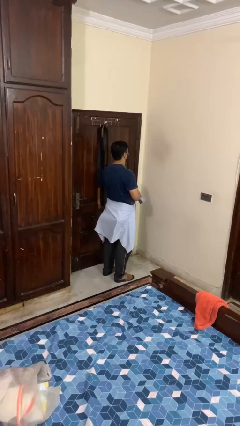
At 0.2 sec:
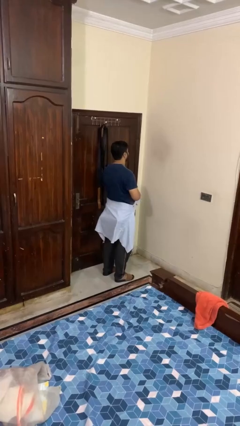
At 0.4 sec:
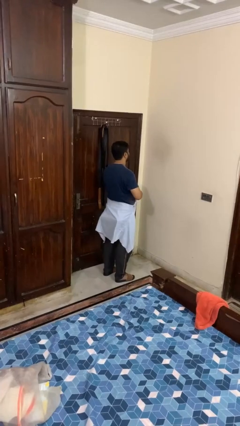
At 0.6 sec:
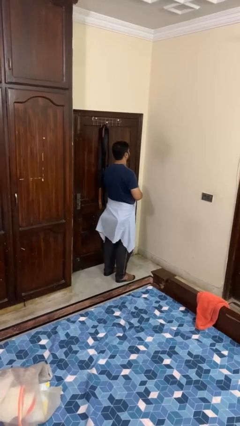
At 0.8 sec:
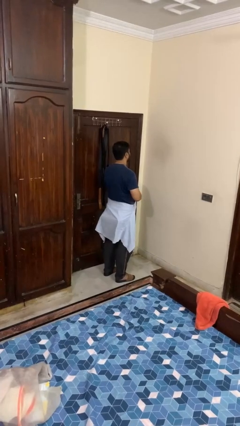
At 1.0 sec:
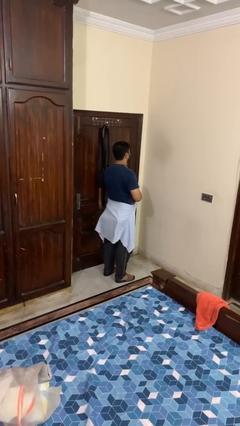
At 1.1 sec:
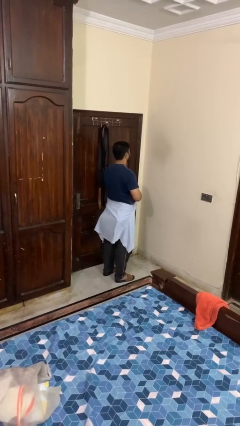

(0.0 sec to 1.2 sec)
person ties jacket around waist

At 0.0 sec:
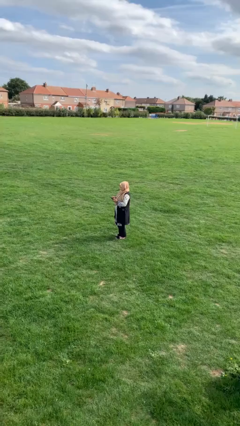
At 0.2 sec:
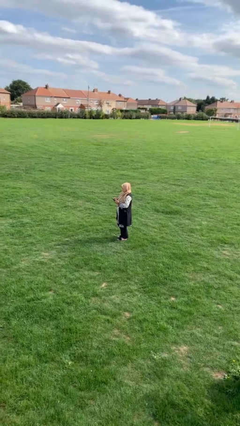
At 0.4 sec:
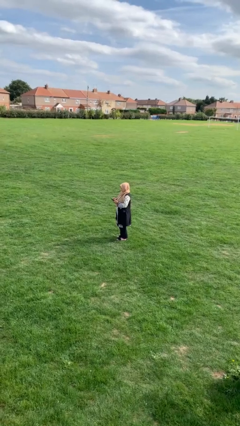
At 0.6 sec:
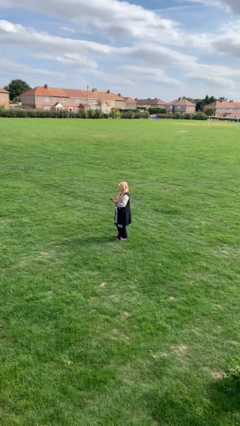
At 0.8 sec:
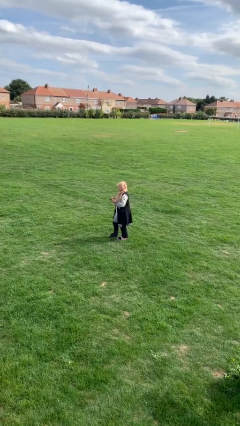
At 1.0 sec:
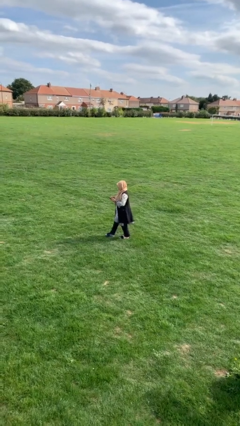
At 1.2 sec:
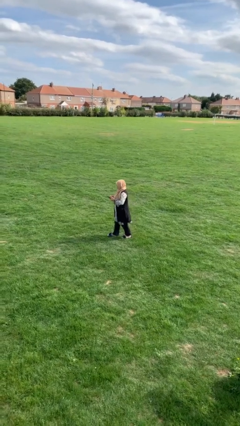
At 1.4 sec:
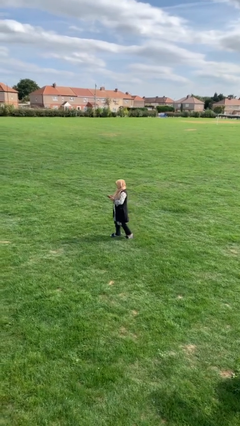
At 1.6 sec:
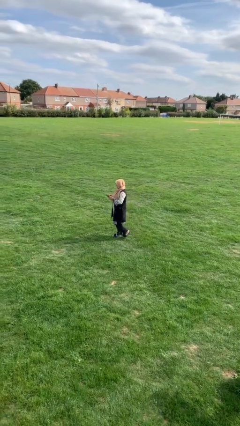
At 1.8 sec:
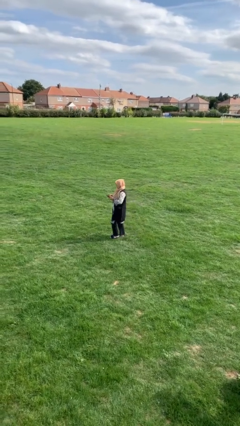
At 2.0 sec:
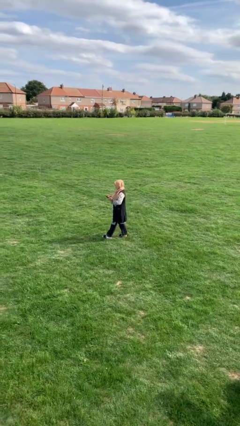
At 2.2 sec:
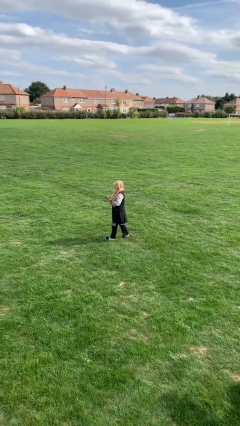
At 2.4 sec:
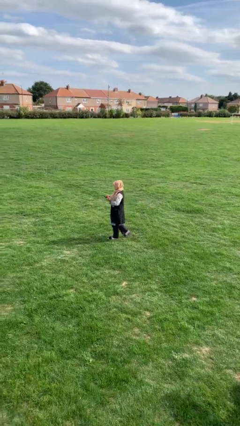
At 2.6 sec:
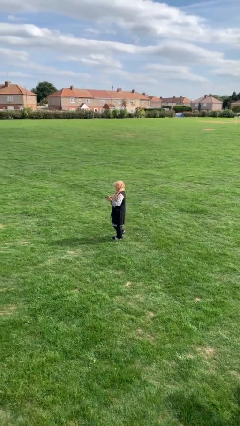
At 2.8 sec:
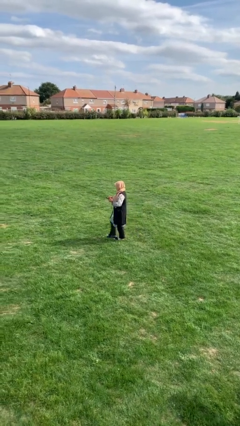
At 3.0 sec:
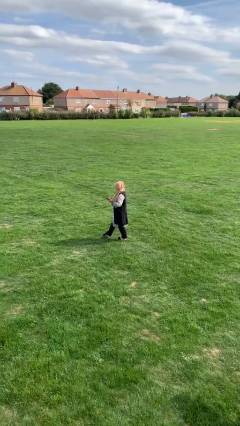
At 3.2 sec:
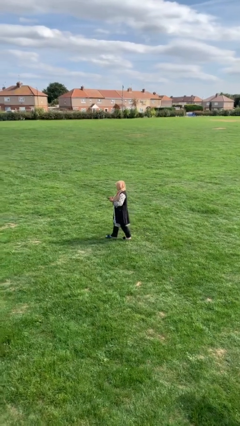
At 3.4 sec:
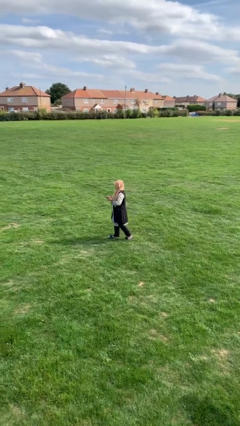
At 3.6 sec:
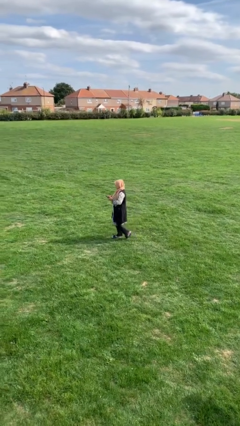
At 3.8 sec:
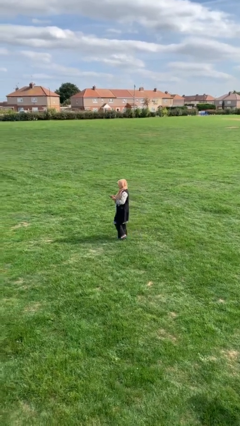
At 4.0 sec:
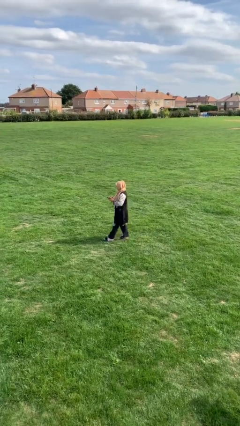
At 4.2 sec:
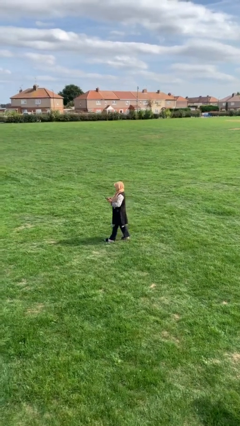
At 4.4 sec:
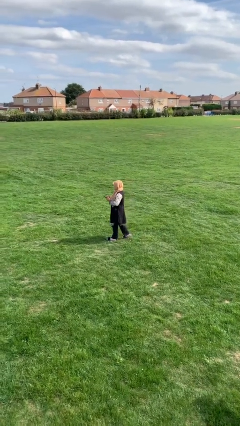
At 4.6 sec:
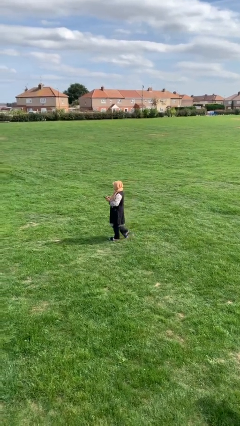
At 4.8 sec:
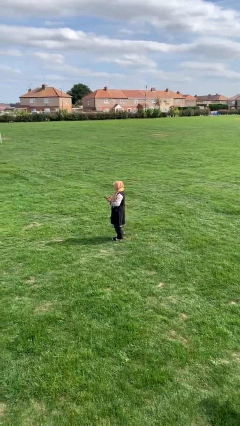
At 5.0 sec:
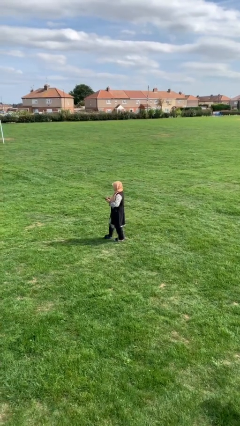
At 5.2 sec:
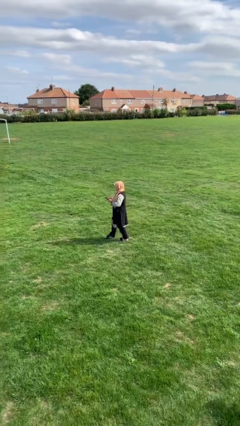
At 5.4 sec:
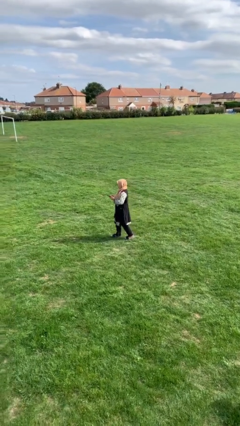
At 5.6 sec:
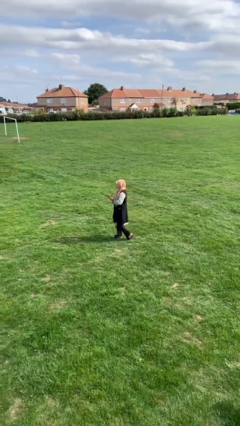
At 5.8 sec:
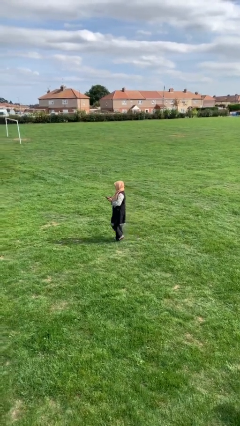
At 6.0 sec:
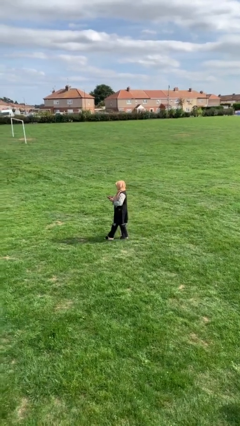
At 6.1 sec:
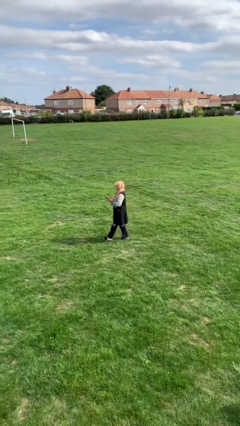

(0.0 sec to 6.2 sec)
person texts on phone

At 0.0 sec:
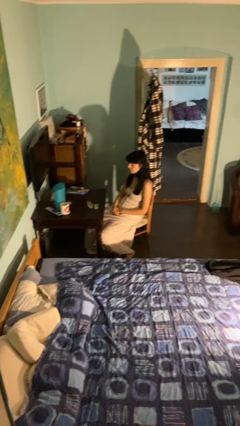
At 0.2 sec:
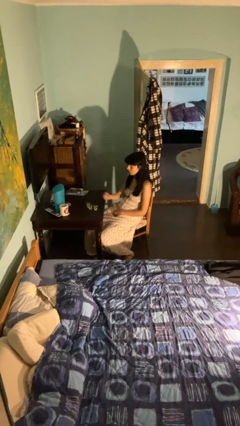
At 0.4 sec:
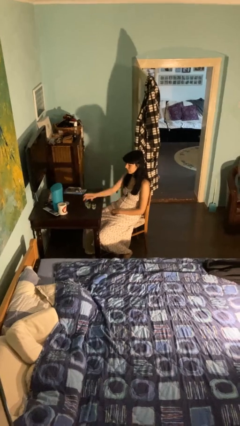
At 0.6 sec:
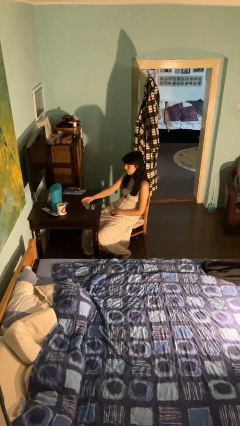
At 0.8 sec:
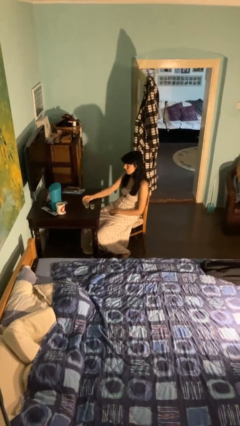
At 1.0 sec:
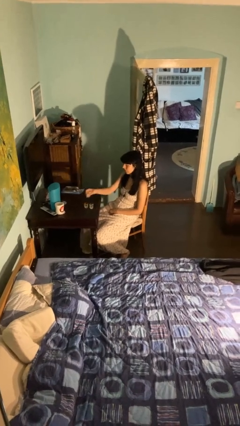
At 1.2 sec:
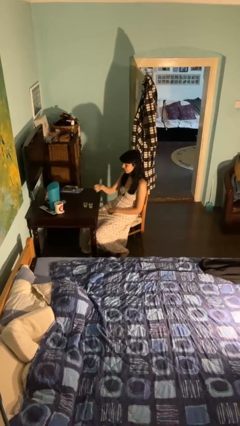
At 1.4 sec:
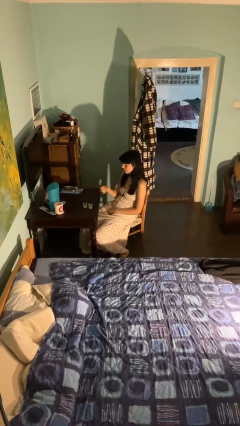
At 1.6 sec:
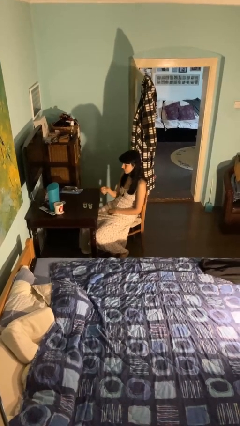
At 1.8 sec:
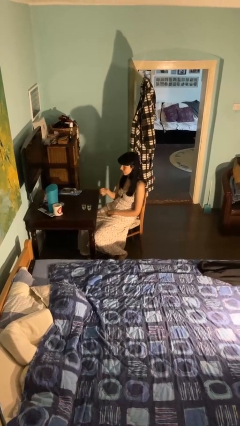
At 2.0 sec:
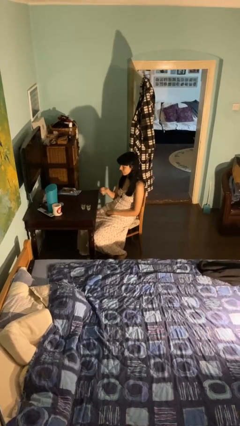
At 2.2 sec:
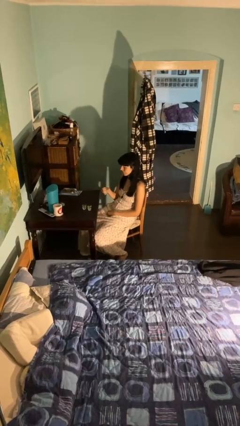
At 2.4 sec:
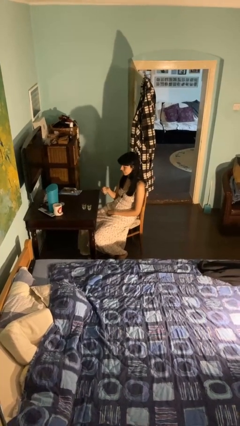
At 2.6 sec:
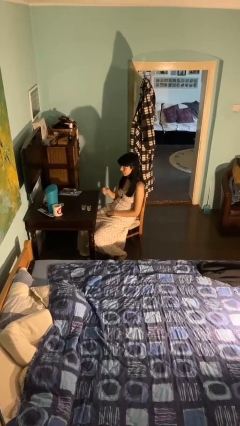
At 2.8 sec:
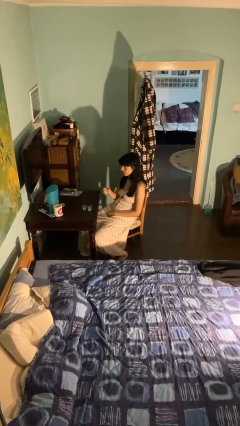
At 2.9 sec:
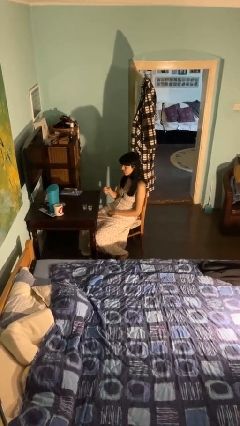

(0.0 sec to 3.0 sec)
person picks up object from table

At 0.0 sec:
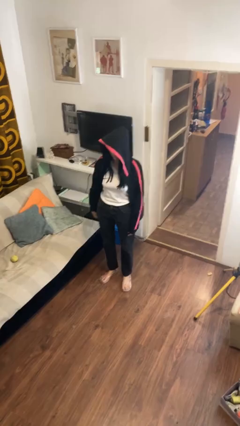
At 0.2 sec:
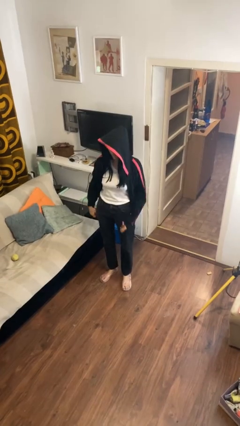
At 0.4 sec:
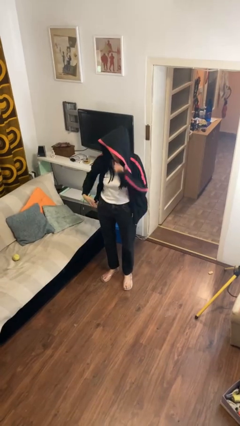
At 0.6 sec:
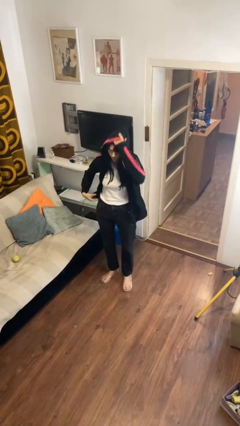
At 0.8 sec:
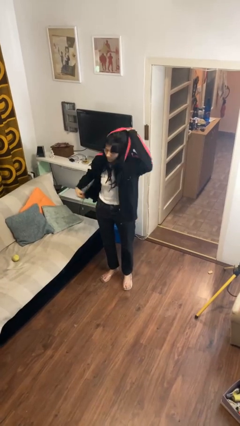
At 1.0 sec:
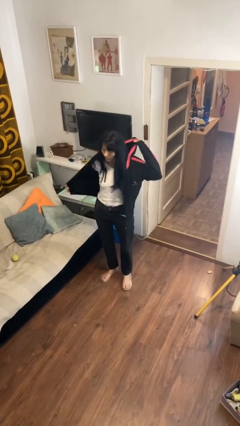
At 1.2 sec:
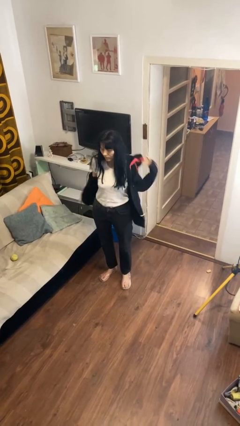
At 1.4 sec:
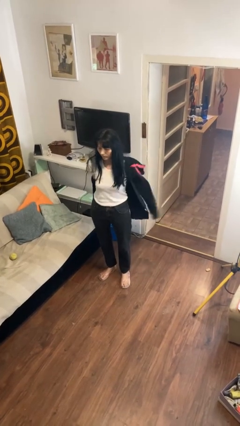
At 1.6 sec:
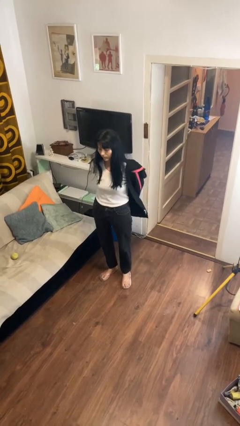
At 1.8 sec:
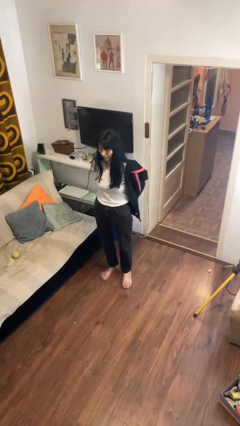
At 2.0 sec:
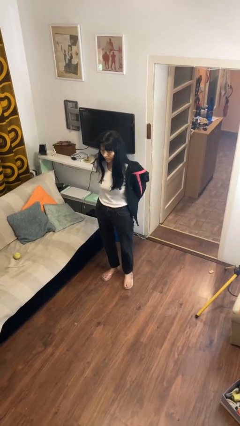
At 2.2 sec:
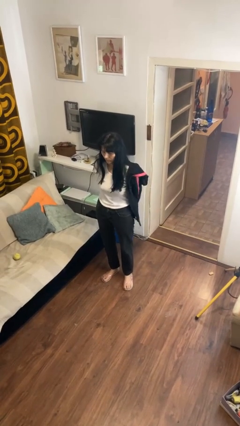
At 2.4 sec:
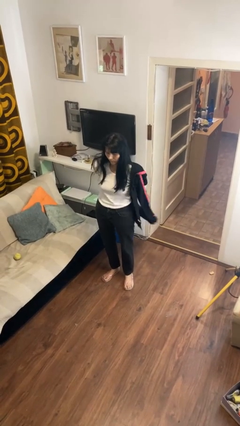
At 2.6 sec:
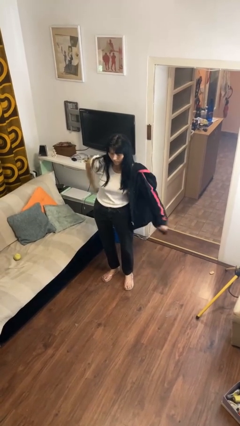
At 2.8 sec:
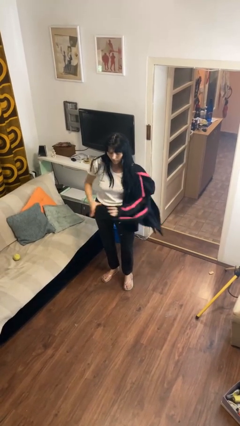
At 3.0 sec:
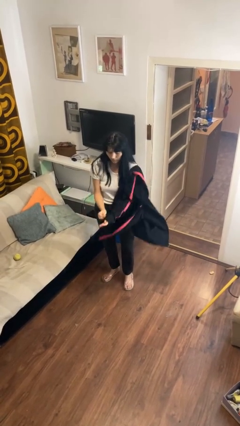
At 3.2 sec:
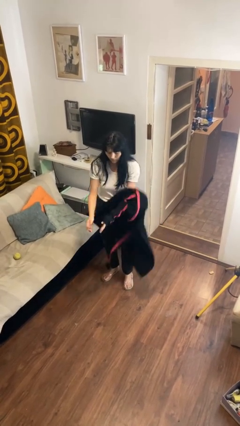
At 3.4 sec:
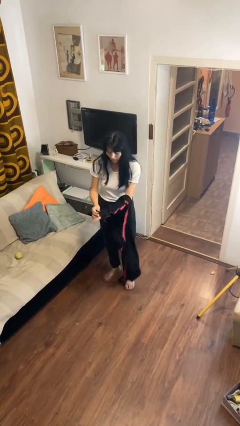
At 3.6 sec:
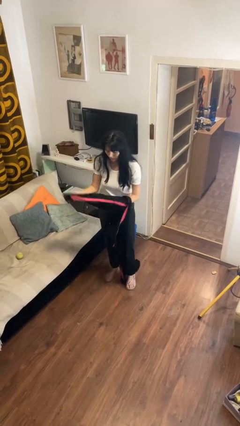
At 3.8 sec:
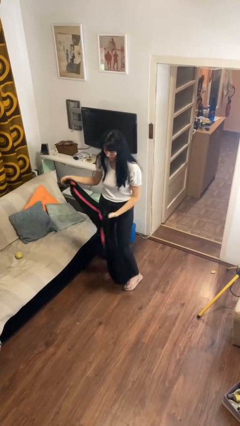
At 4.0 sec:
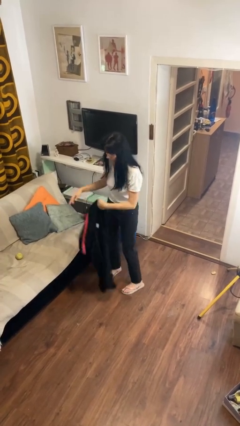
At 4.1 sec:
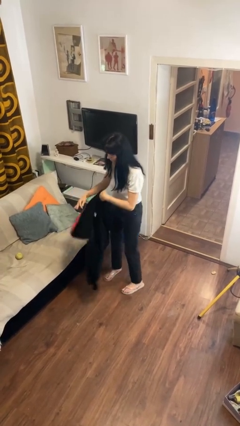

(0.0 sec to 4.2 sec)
person takes off hoodie

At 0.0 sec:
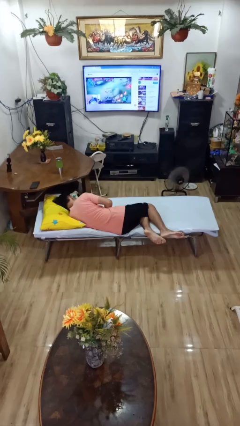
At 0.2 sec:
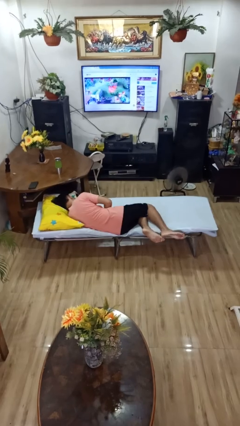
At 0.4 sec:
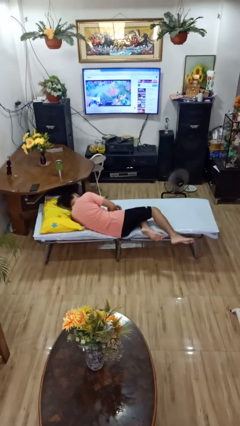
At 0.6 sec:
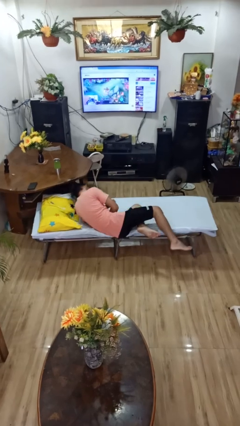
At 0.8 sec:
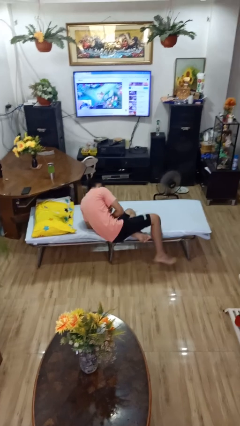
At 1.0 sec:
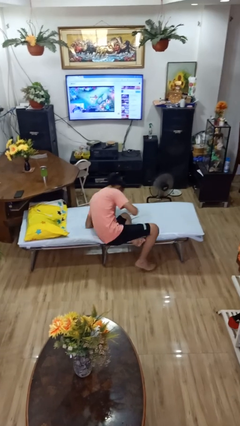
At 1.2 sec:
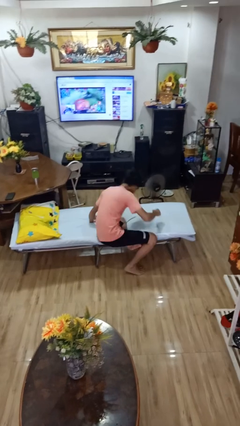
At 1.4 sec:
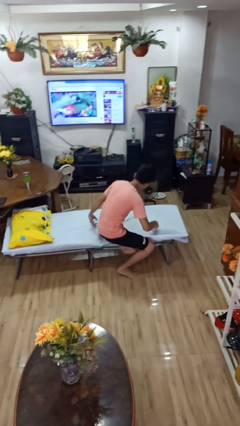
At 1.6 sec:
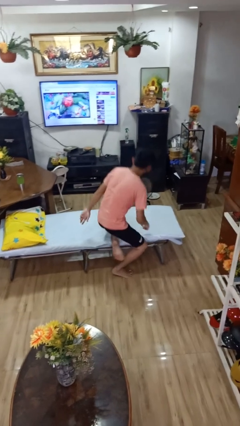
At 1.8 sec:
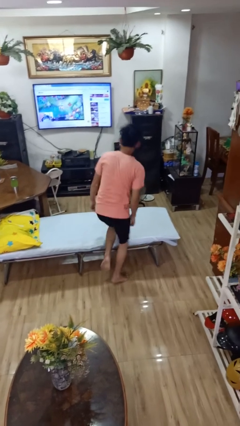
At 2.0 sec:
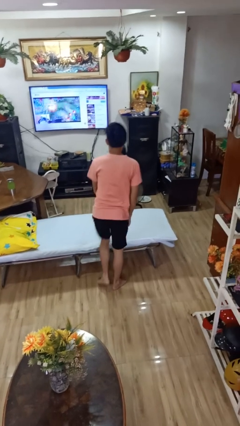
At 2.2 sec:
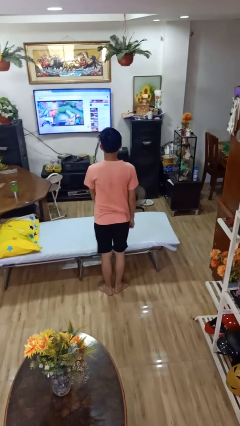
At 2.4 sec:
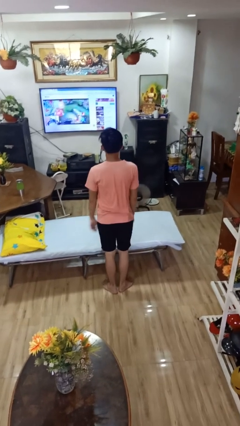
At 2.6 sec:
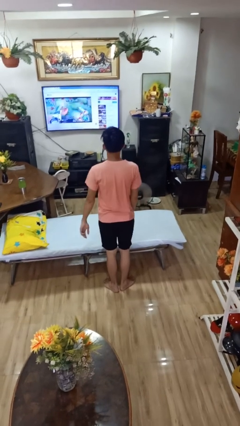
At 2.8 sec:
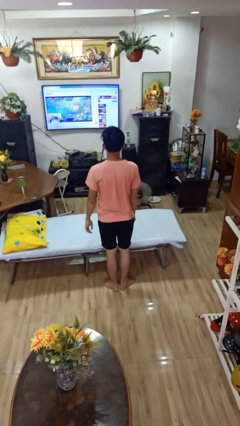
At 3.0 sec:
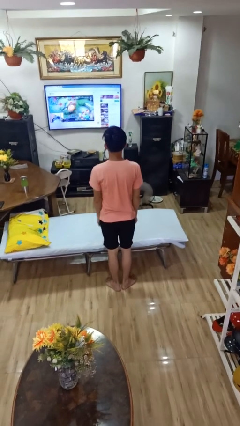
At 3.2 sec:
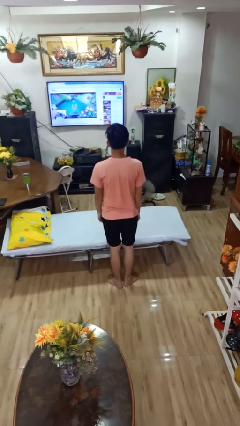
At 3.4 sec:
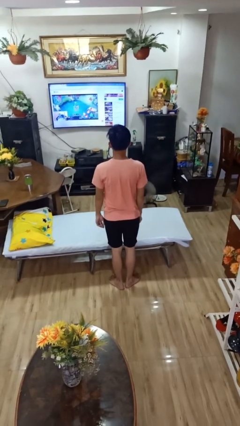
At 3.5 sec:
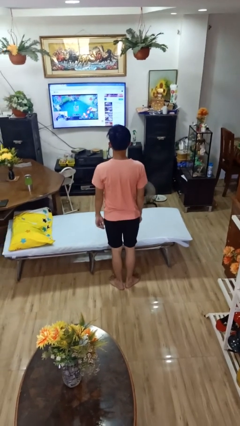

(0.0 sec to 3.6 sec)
person stands up
